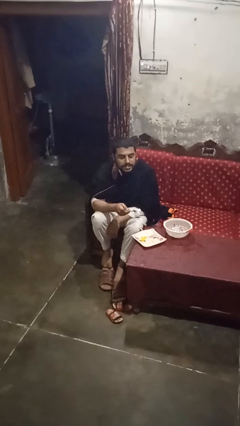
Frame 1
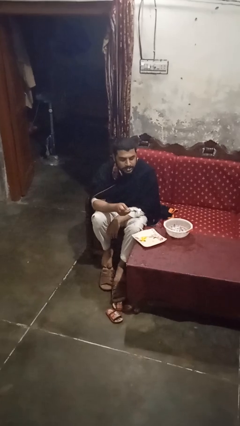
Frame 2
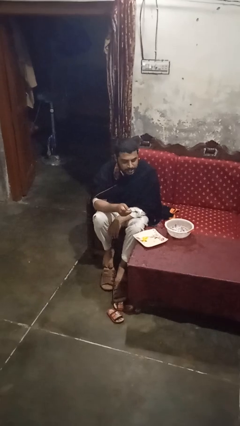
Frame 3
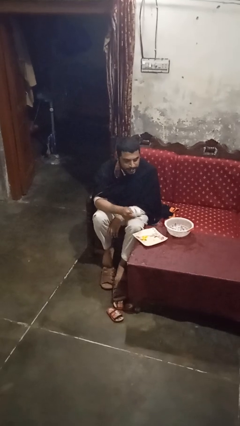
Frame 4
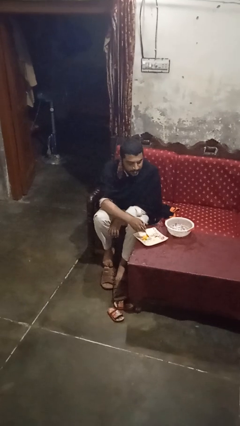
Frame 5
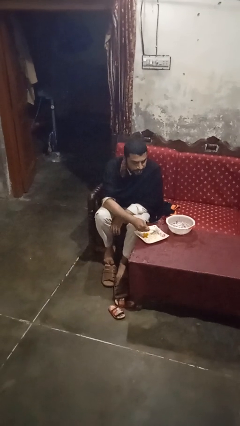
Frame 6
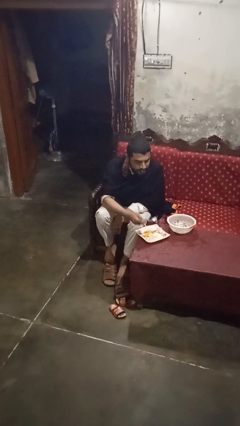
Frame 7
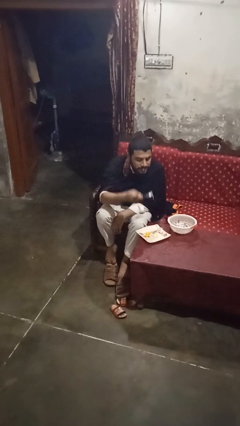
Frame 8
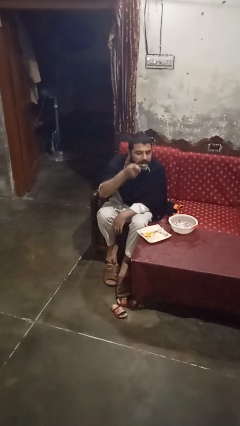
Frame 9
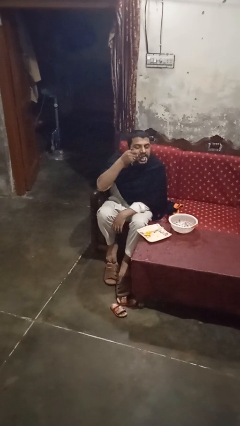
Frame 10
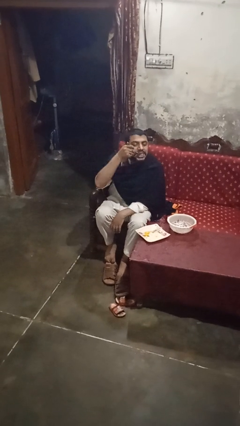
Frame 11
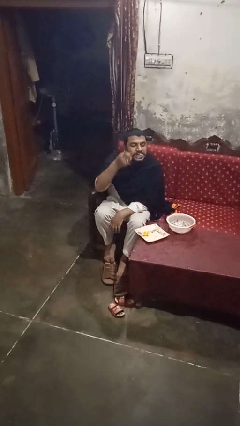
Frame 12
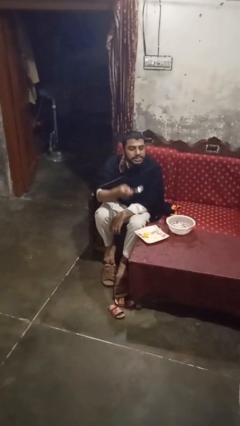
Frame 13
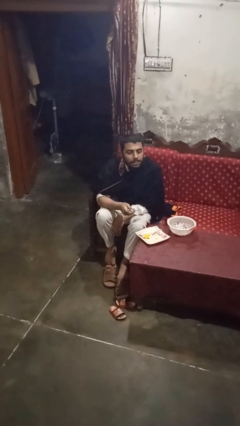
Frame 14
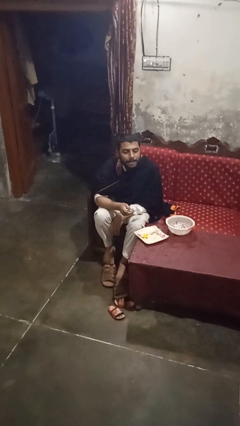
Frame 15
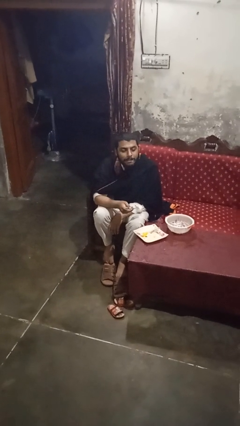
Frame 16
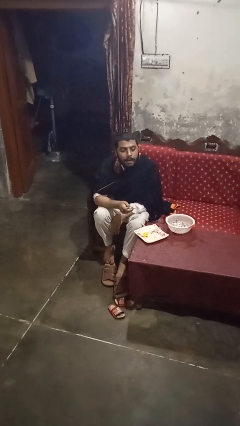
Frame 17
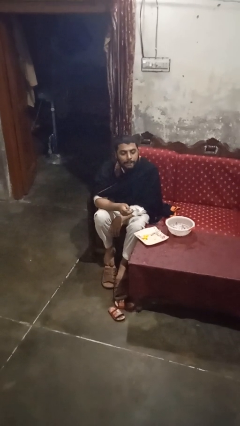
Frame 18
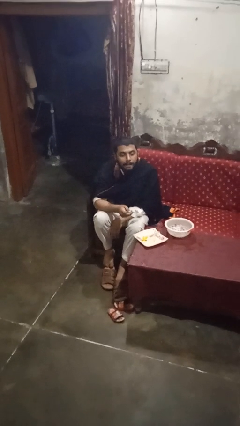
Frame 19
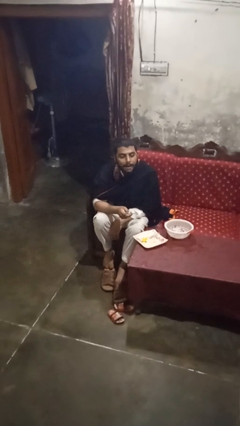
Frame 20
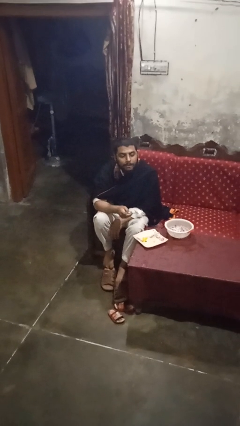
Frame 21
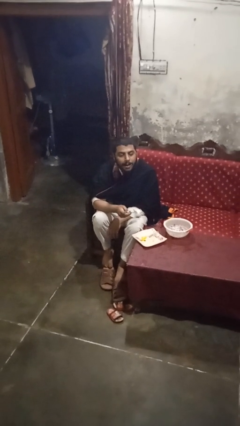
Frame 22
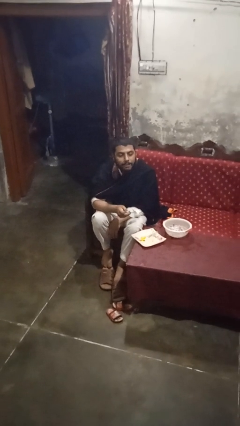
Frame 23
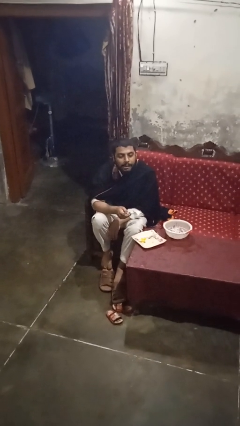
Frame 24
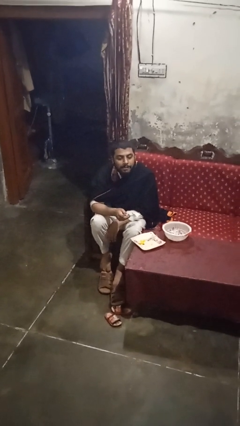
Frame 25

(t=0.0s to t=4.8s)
person eats with utensil

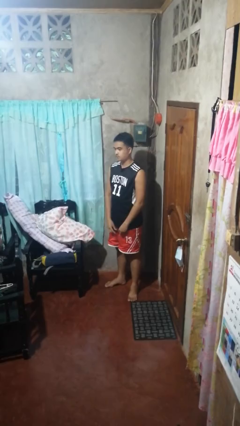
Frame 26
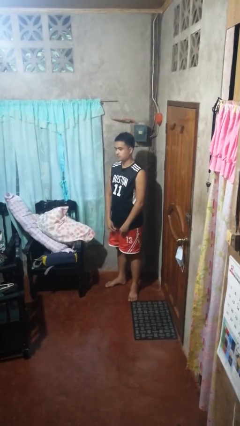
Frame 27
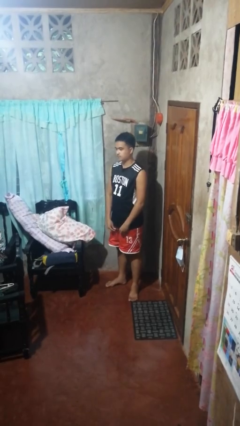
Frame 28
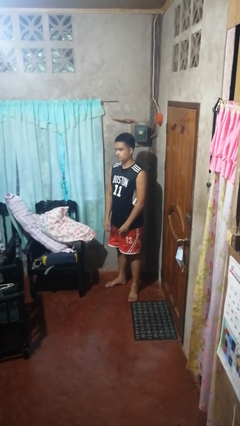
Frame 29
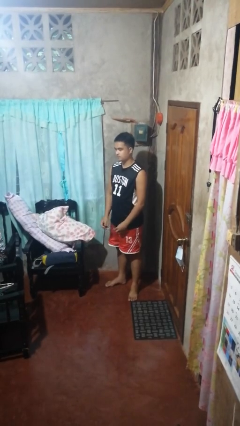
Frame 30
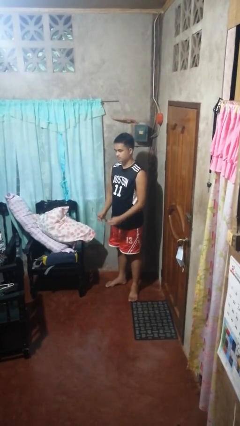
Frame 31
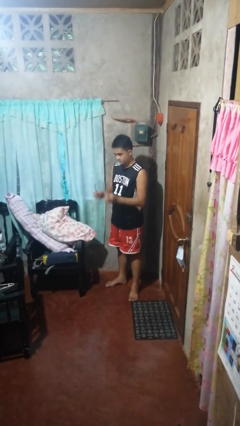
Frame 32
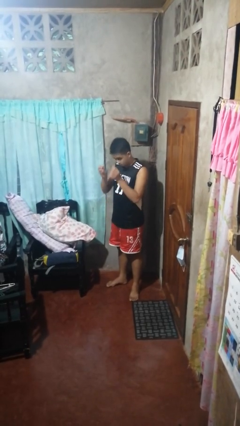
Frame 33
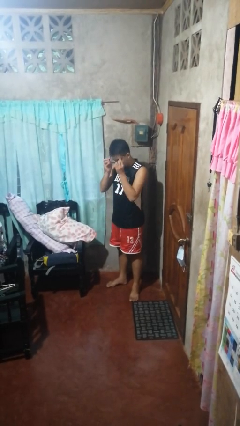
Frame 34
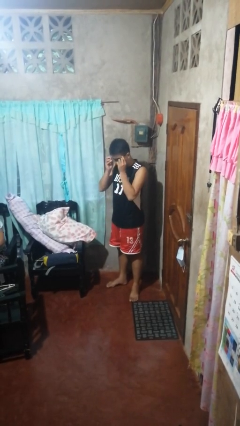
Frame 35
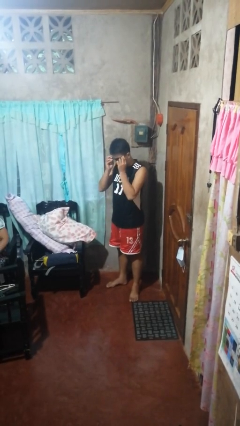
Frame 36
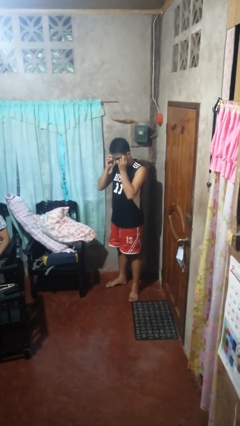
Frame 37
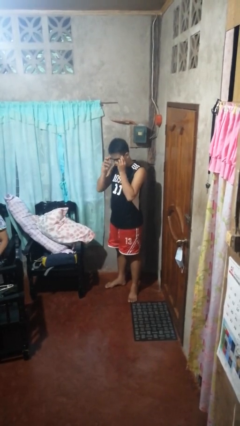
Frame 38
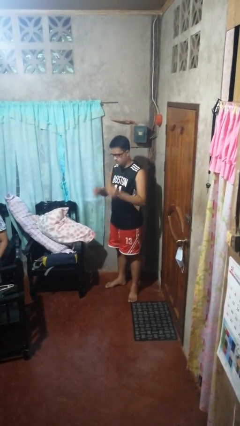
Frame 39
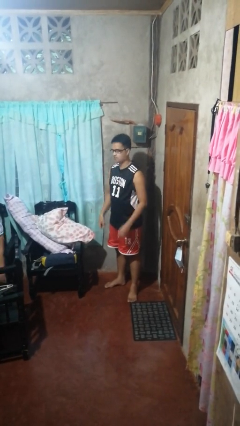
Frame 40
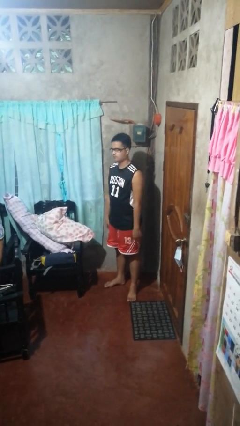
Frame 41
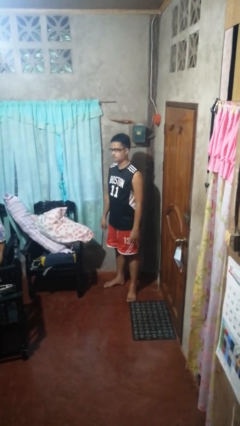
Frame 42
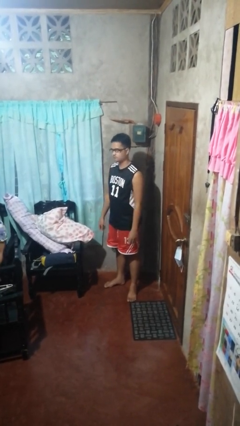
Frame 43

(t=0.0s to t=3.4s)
person puts on glasses

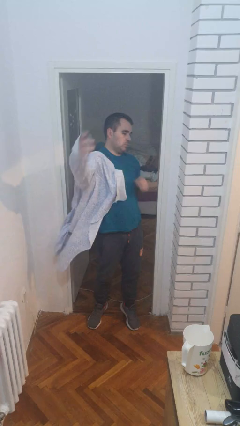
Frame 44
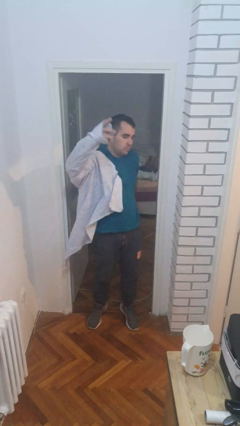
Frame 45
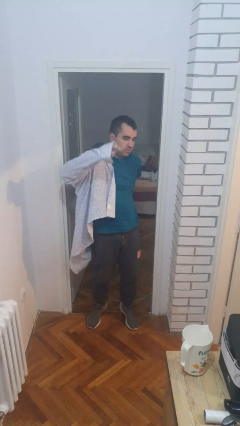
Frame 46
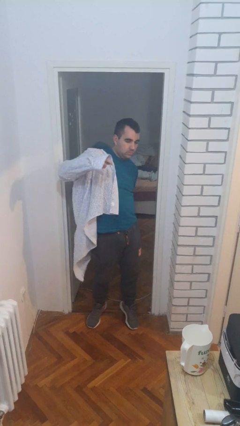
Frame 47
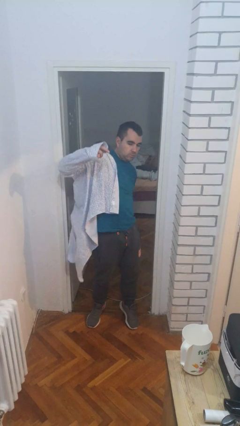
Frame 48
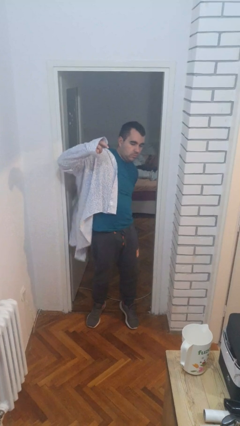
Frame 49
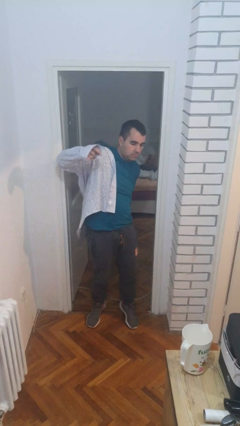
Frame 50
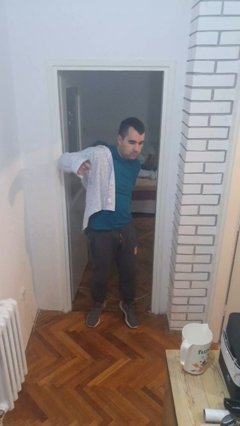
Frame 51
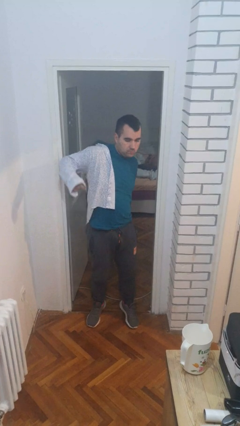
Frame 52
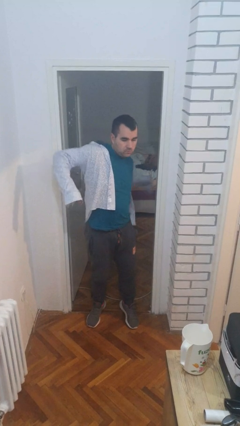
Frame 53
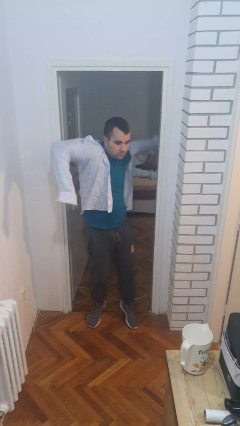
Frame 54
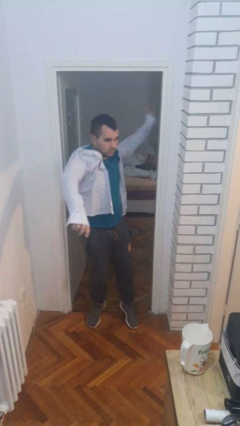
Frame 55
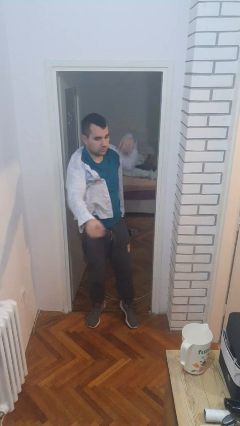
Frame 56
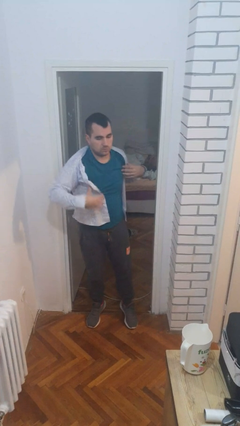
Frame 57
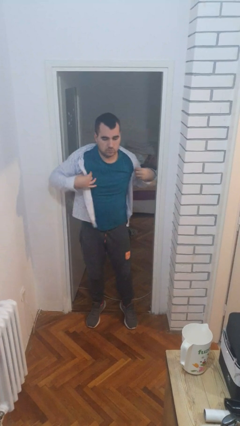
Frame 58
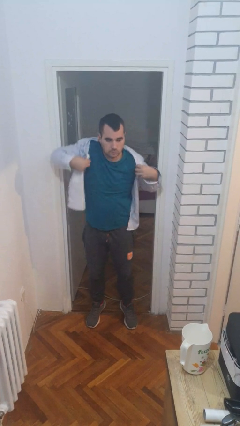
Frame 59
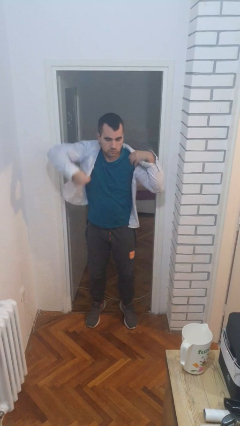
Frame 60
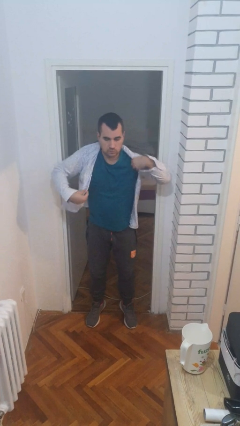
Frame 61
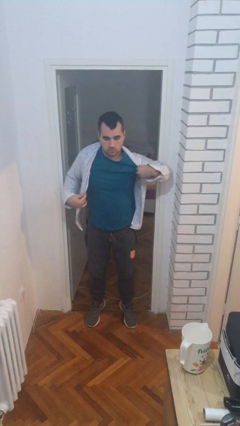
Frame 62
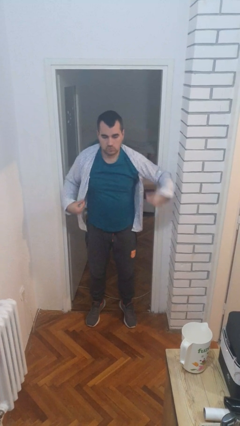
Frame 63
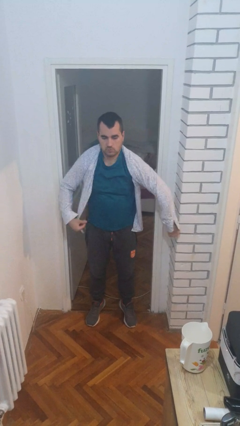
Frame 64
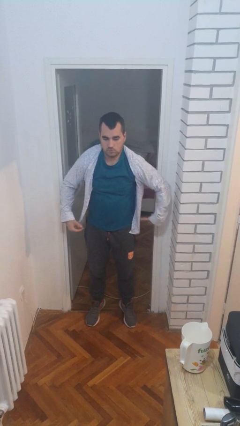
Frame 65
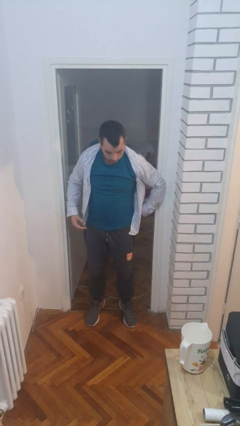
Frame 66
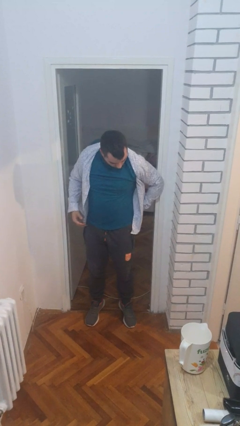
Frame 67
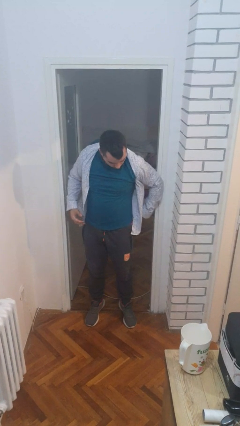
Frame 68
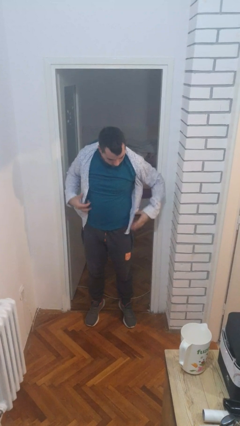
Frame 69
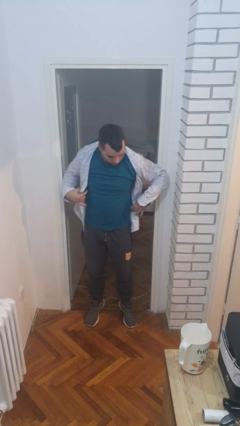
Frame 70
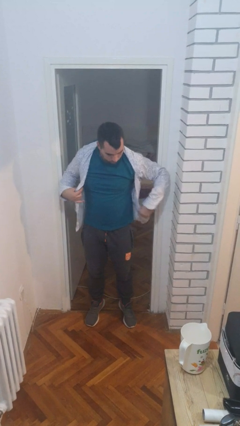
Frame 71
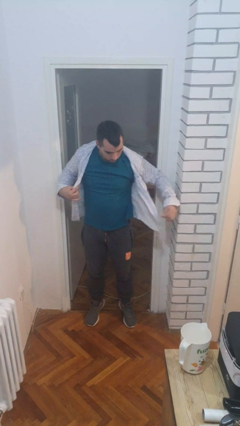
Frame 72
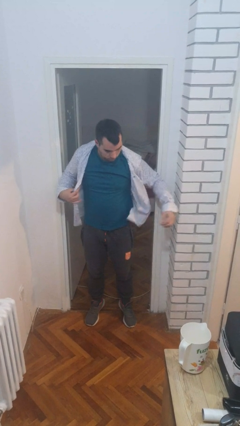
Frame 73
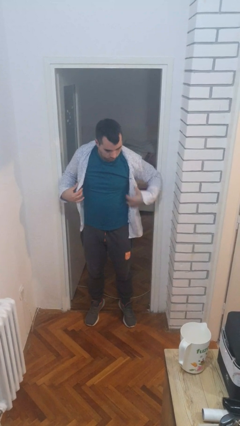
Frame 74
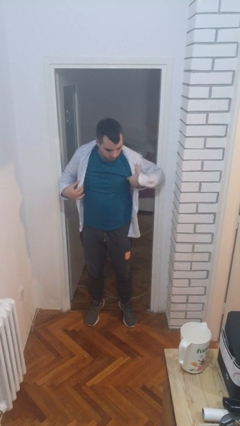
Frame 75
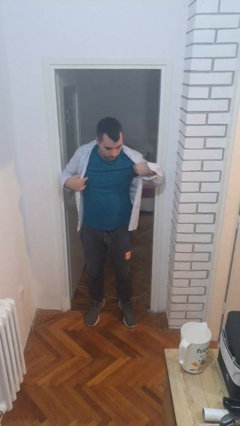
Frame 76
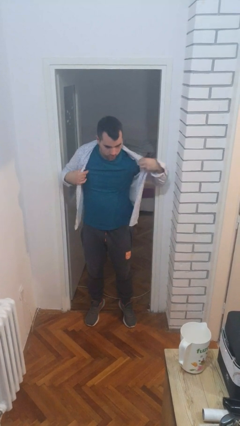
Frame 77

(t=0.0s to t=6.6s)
person puts on shirt

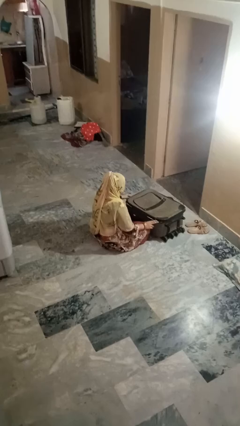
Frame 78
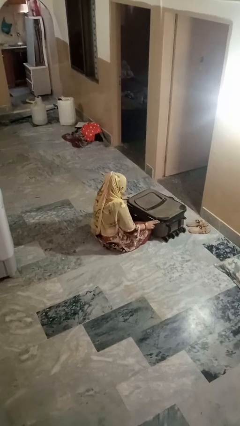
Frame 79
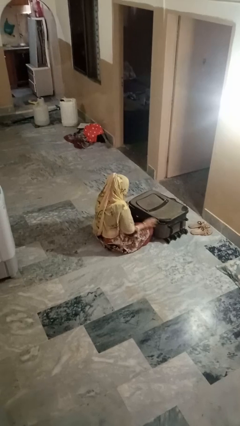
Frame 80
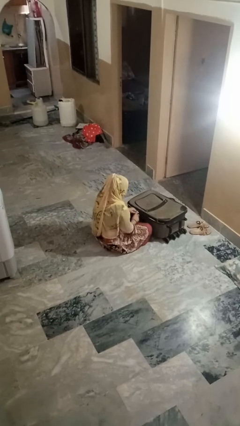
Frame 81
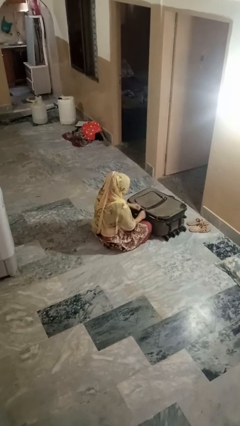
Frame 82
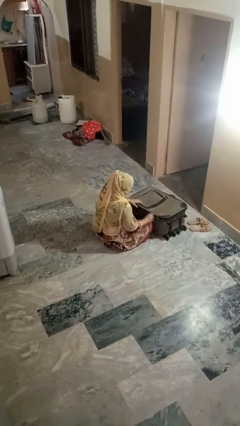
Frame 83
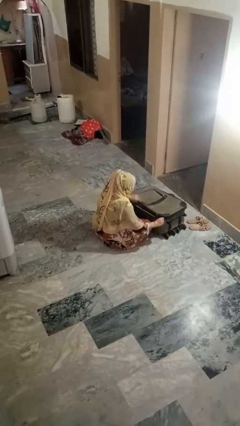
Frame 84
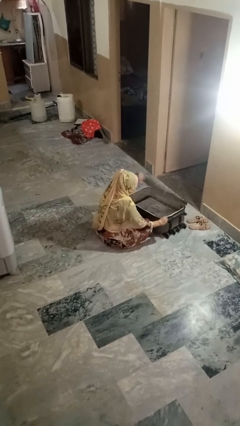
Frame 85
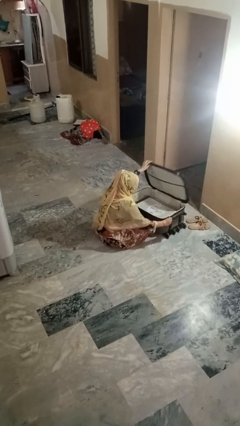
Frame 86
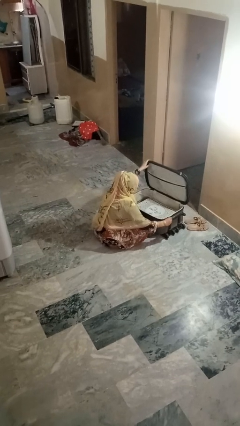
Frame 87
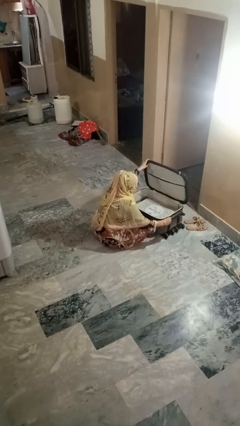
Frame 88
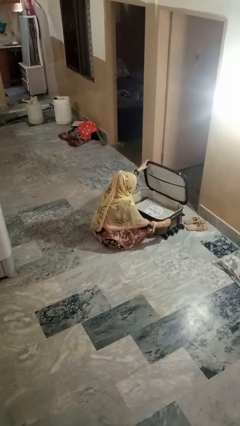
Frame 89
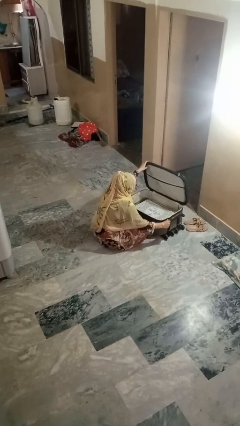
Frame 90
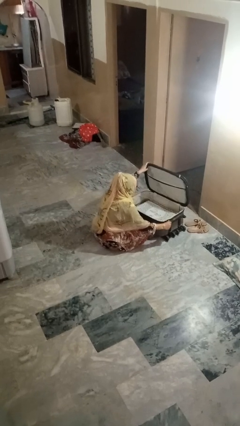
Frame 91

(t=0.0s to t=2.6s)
person opens suitcase

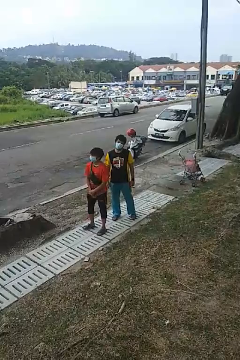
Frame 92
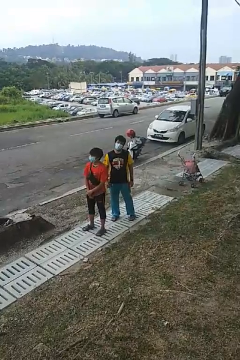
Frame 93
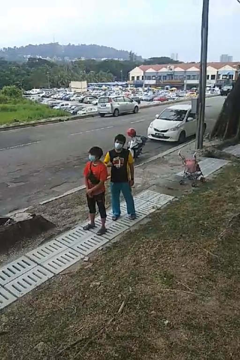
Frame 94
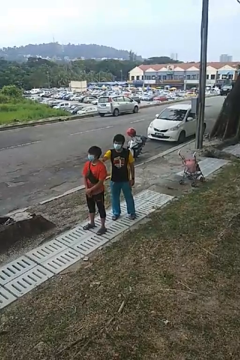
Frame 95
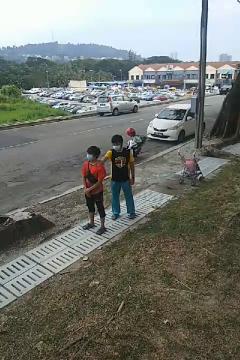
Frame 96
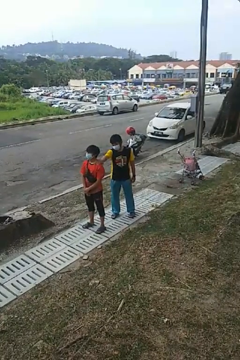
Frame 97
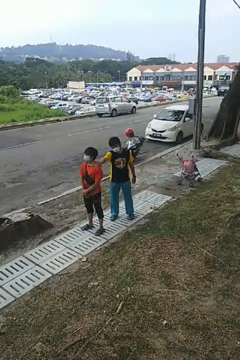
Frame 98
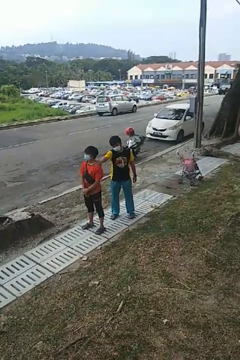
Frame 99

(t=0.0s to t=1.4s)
person grabs person by shoulder
